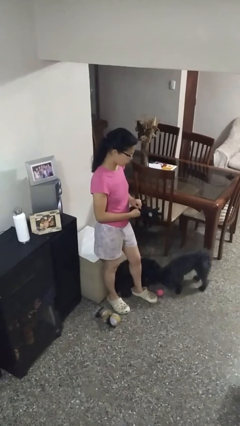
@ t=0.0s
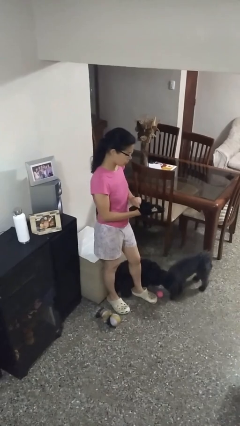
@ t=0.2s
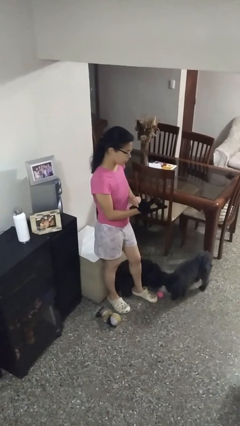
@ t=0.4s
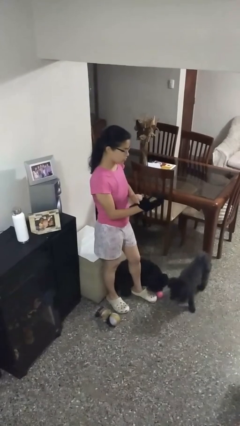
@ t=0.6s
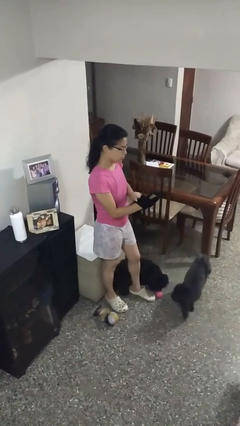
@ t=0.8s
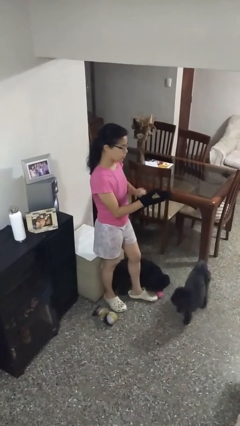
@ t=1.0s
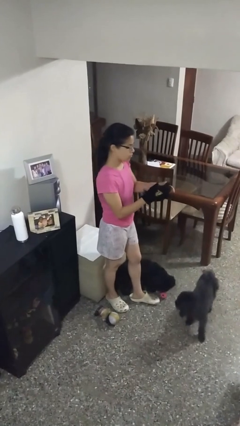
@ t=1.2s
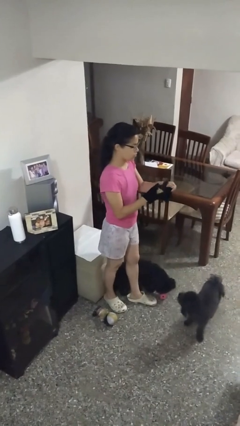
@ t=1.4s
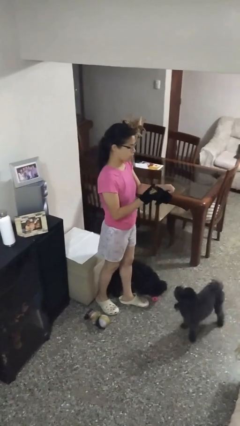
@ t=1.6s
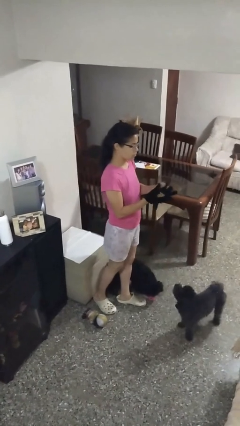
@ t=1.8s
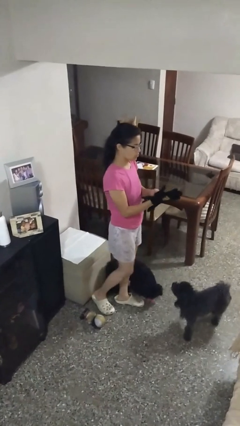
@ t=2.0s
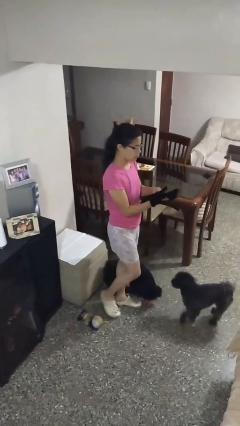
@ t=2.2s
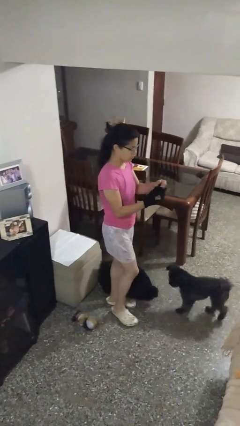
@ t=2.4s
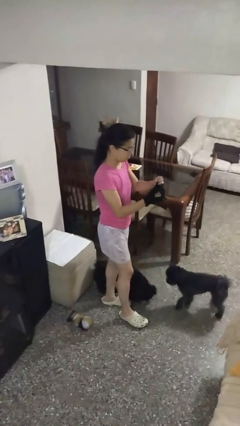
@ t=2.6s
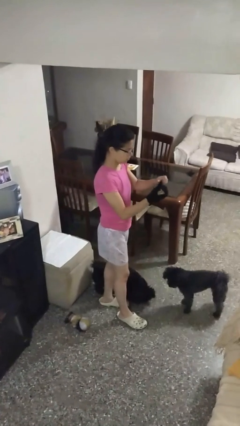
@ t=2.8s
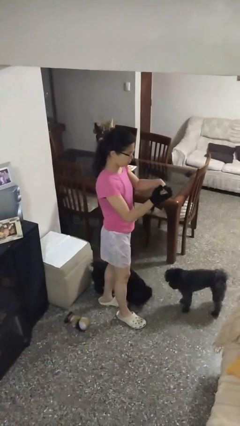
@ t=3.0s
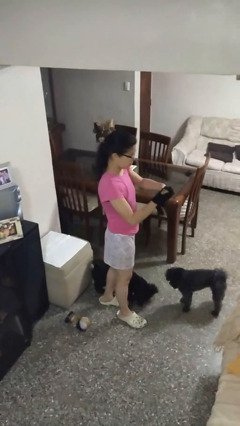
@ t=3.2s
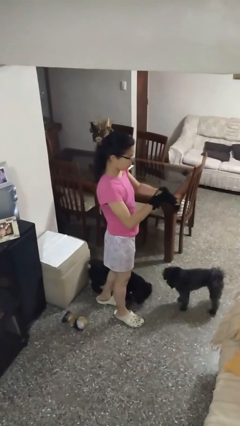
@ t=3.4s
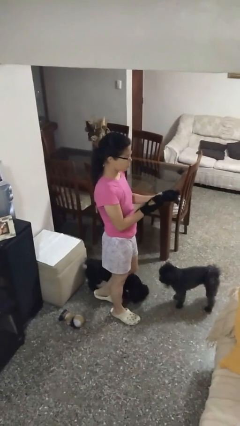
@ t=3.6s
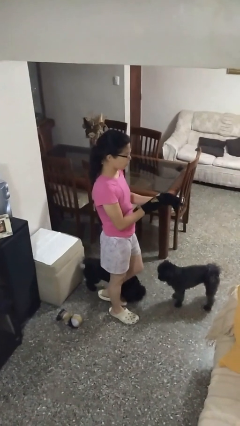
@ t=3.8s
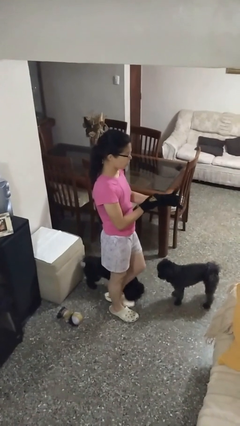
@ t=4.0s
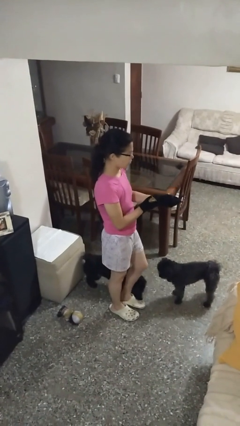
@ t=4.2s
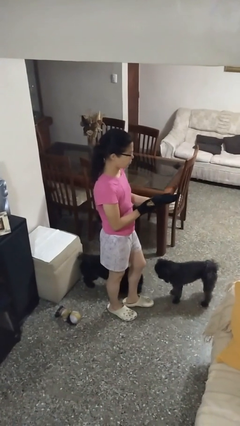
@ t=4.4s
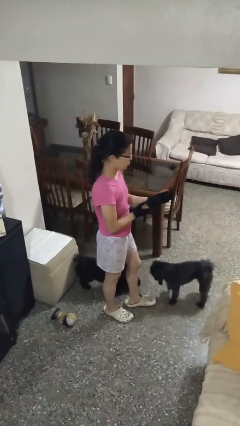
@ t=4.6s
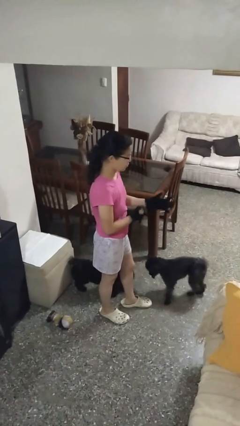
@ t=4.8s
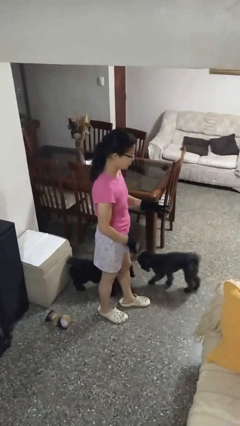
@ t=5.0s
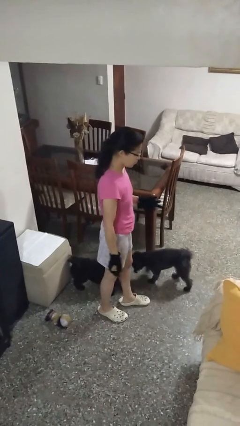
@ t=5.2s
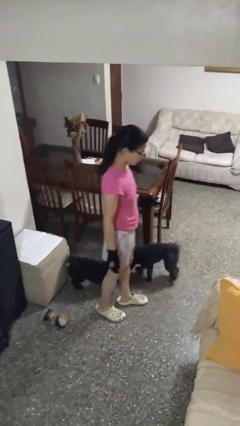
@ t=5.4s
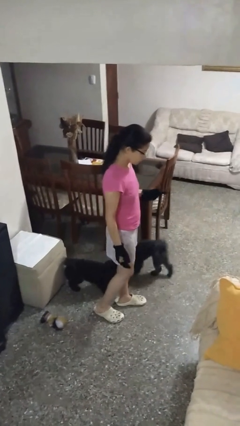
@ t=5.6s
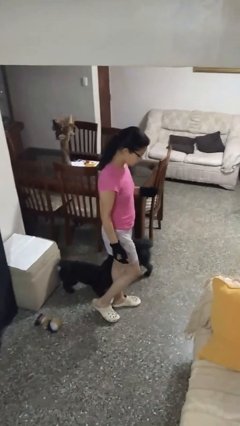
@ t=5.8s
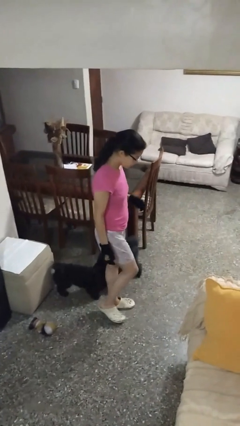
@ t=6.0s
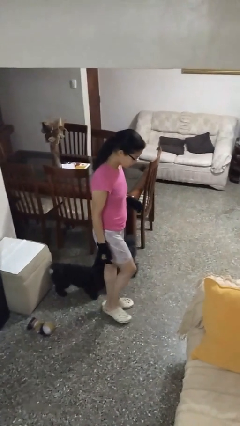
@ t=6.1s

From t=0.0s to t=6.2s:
person puts on gloves

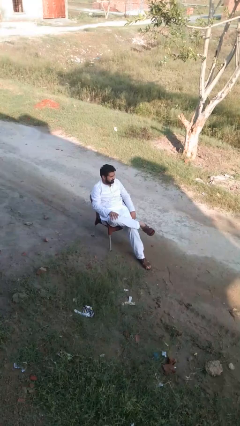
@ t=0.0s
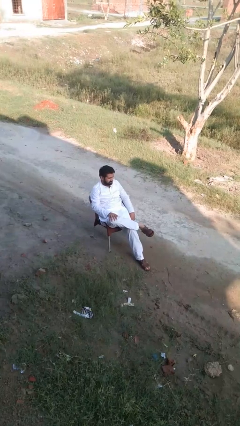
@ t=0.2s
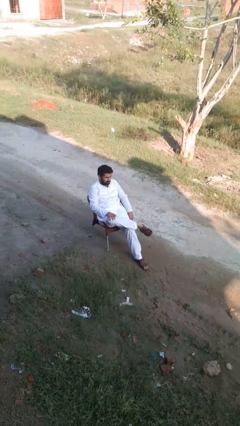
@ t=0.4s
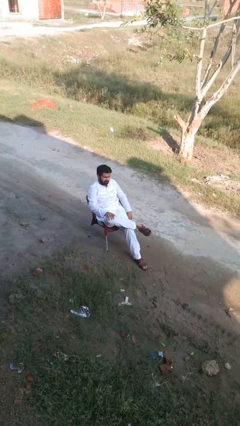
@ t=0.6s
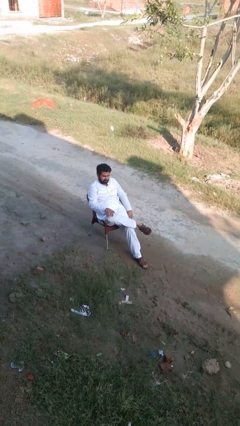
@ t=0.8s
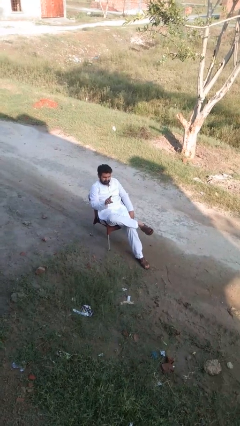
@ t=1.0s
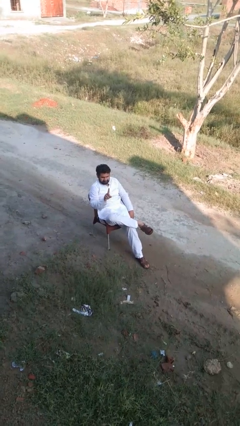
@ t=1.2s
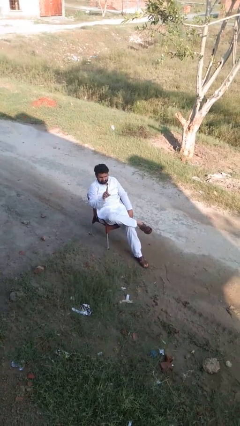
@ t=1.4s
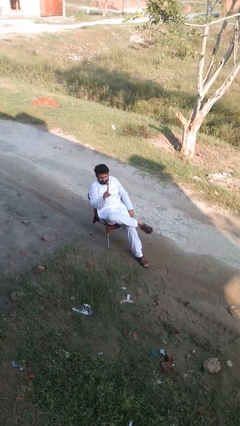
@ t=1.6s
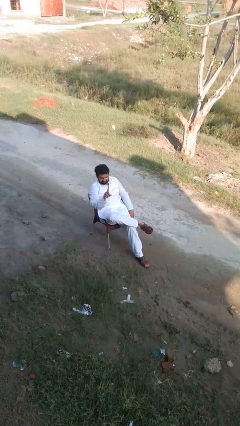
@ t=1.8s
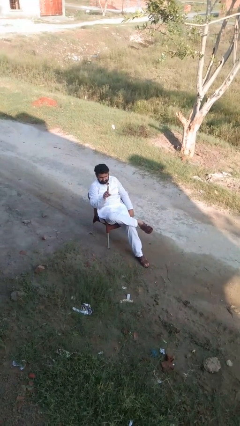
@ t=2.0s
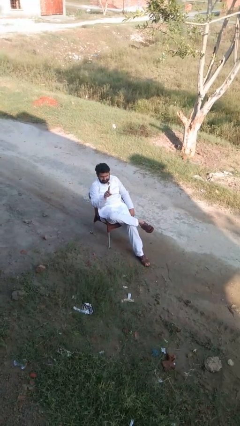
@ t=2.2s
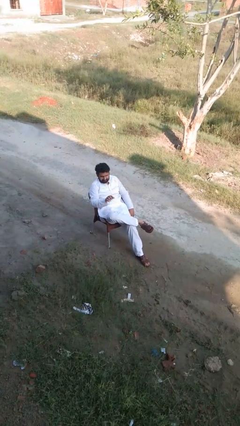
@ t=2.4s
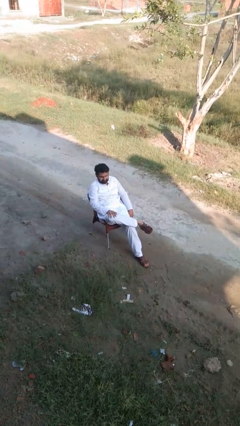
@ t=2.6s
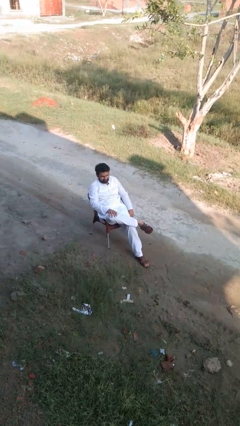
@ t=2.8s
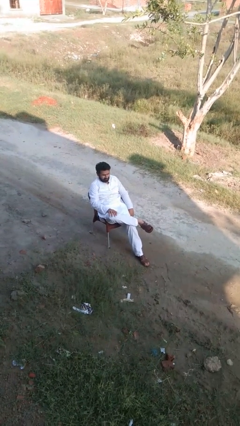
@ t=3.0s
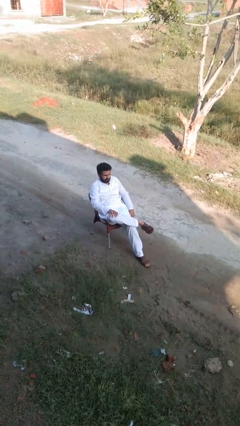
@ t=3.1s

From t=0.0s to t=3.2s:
person gestures number one

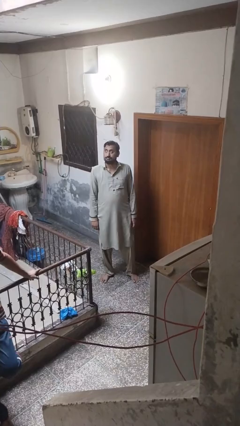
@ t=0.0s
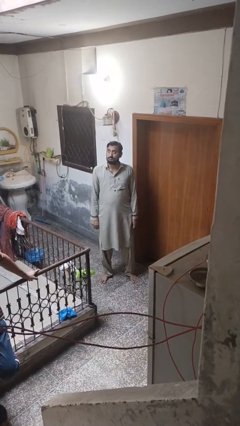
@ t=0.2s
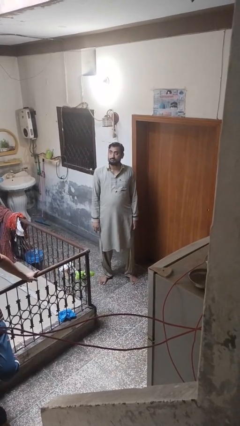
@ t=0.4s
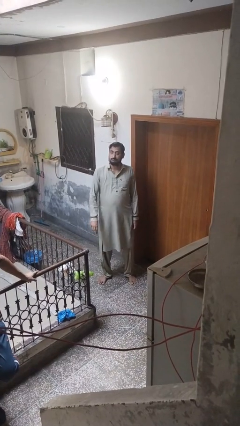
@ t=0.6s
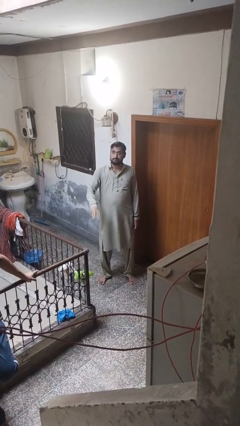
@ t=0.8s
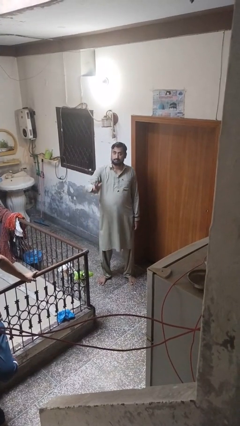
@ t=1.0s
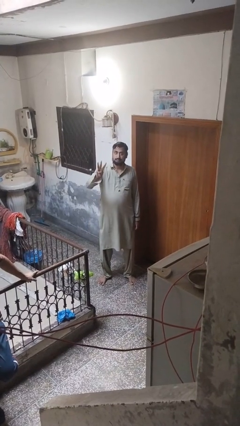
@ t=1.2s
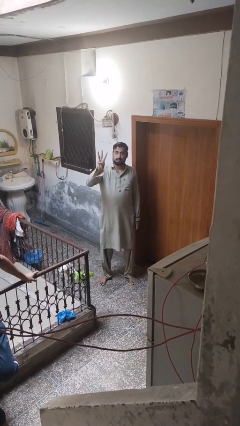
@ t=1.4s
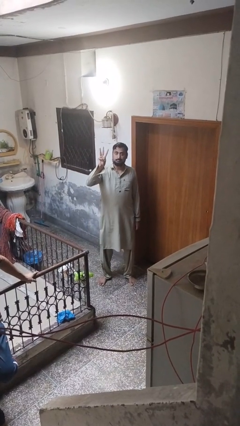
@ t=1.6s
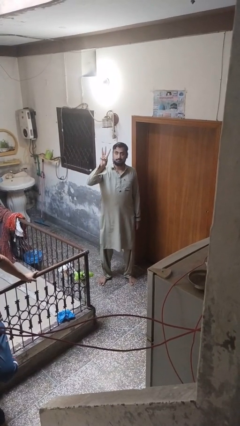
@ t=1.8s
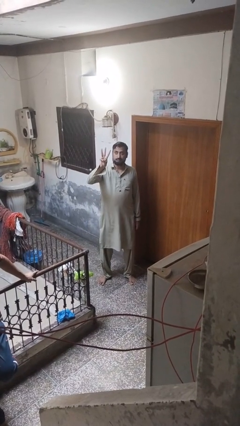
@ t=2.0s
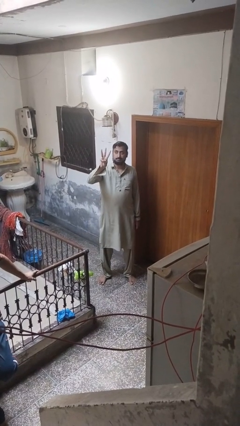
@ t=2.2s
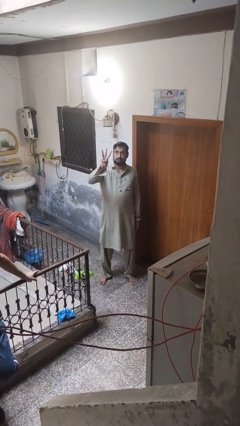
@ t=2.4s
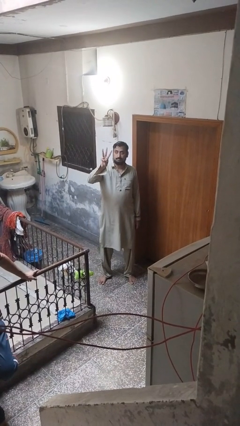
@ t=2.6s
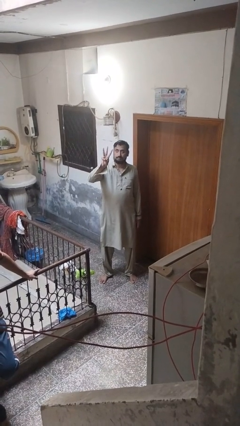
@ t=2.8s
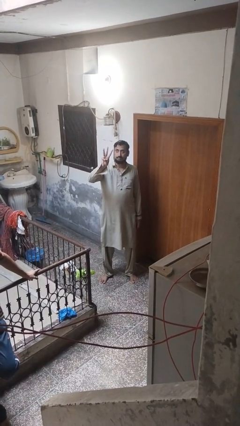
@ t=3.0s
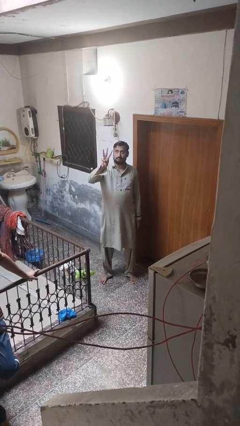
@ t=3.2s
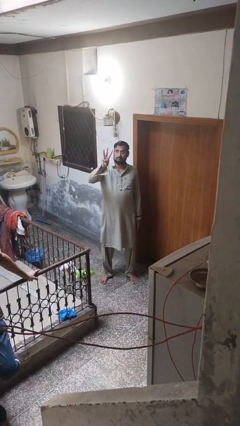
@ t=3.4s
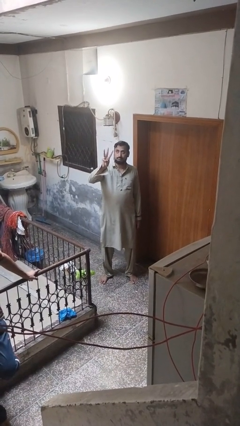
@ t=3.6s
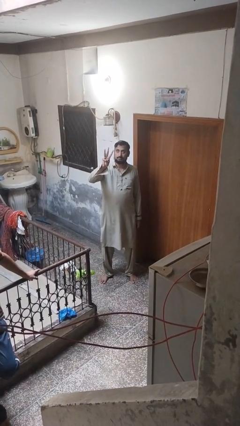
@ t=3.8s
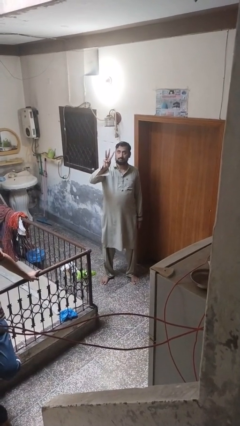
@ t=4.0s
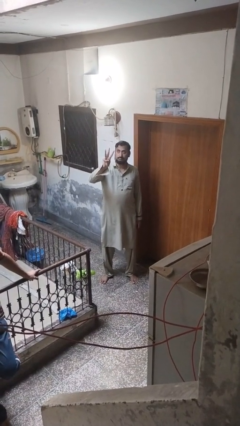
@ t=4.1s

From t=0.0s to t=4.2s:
person gestures number three

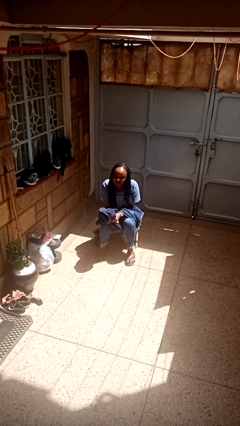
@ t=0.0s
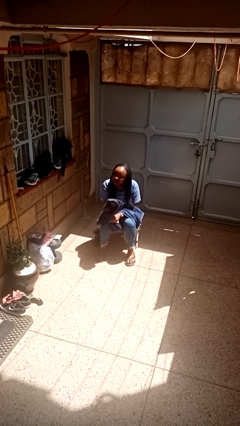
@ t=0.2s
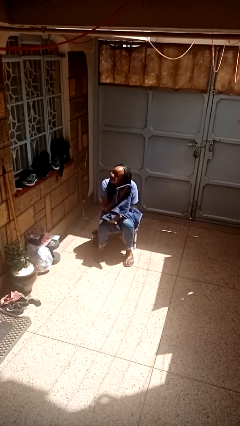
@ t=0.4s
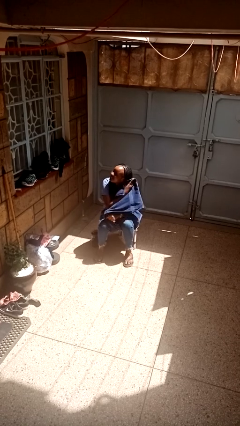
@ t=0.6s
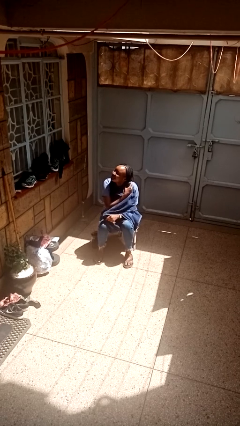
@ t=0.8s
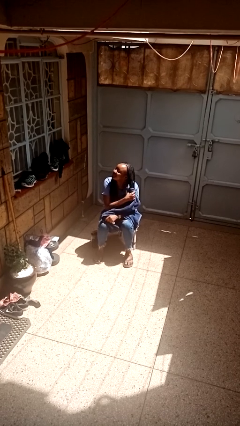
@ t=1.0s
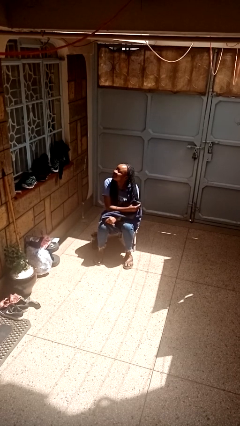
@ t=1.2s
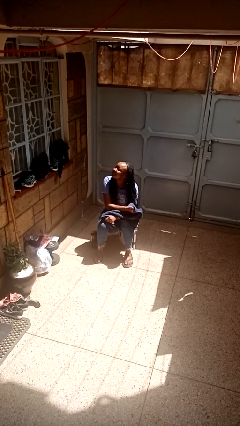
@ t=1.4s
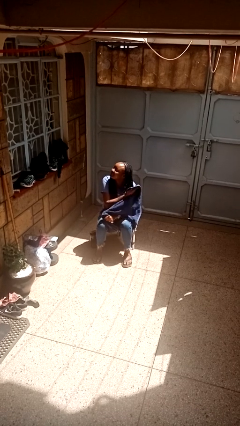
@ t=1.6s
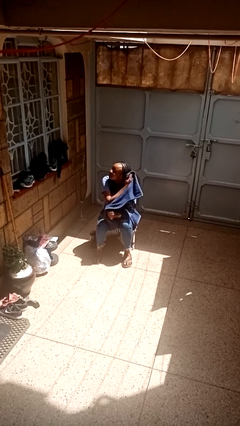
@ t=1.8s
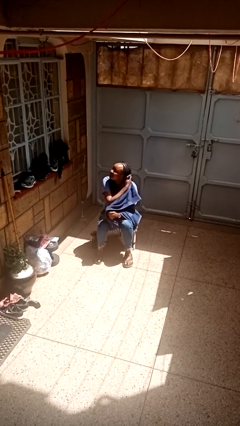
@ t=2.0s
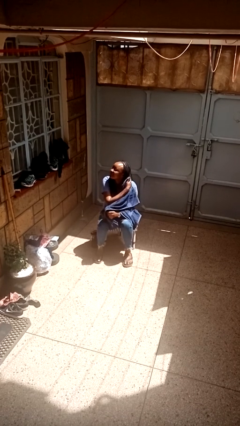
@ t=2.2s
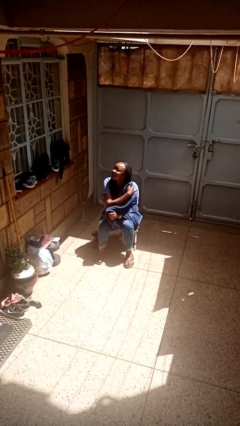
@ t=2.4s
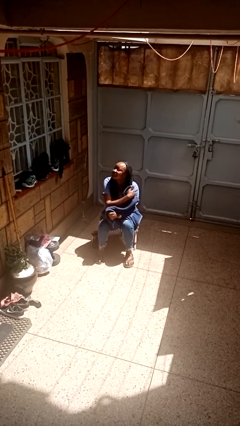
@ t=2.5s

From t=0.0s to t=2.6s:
person dries hair with towel

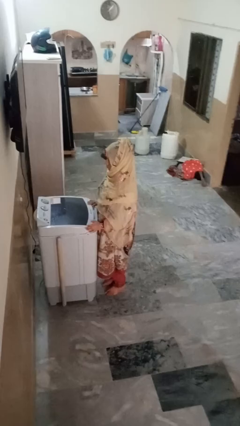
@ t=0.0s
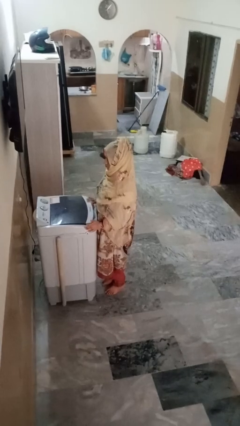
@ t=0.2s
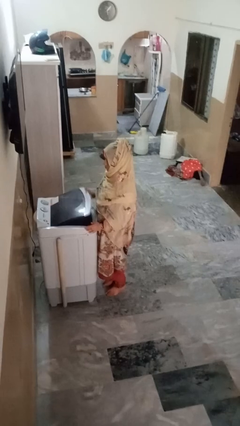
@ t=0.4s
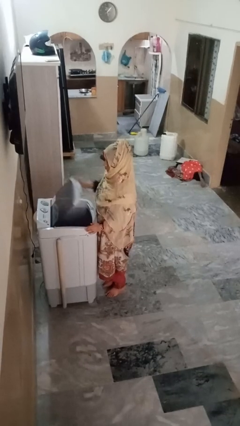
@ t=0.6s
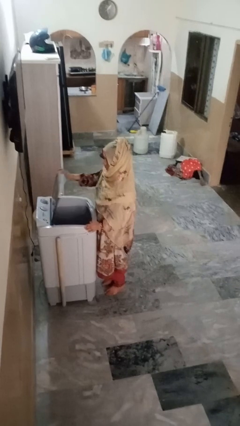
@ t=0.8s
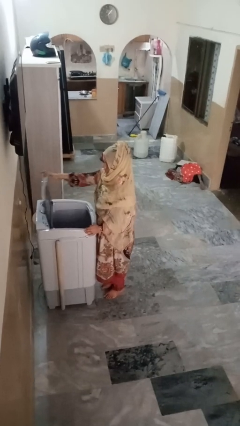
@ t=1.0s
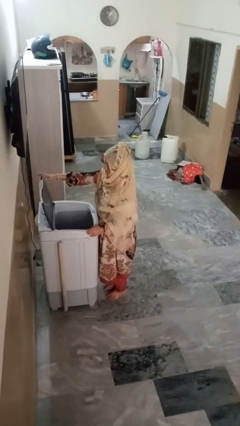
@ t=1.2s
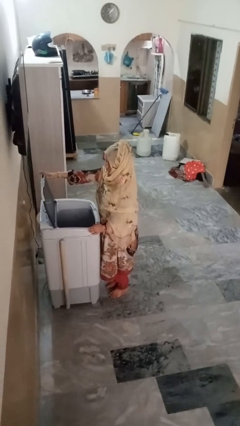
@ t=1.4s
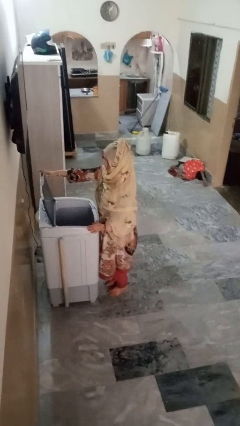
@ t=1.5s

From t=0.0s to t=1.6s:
person opens clothes washer
